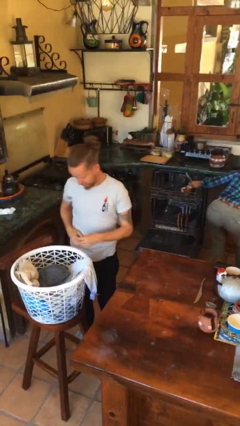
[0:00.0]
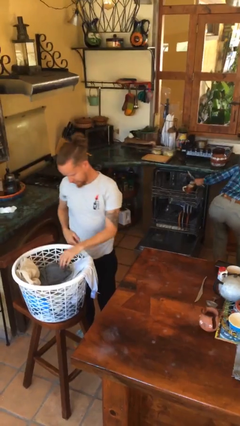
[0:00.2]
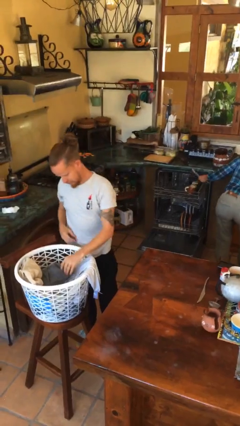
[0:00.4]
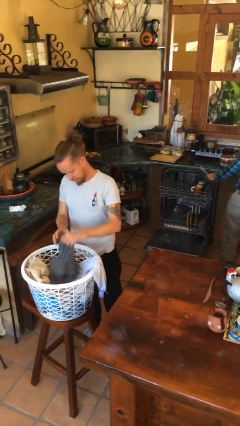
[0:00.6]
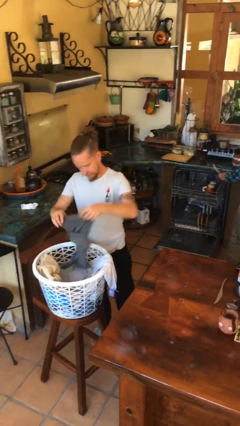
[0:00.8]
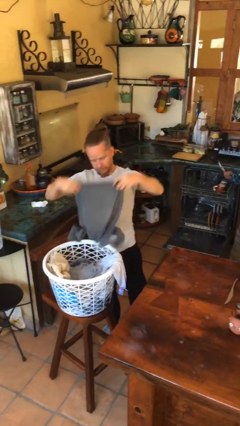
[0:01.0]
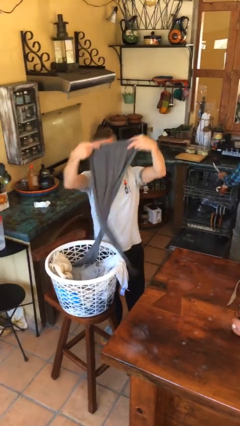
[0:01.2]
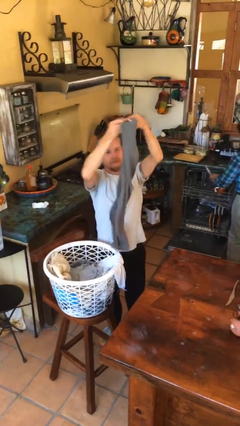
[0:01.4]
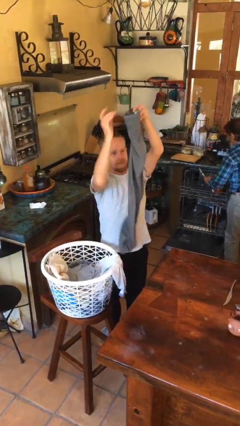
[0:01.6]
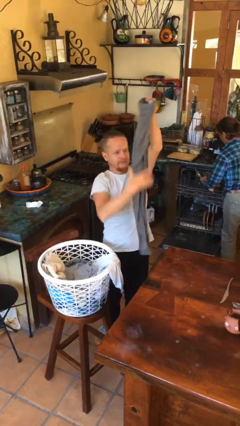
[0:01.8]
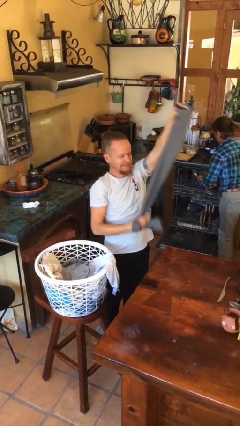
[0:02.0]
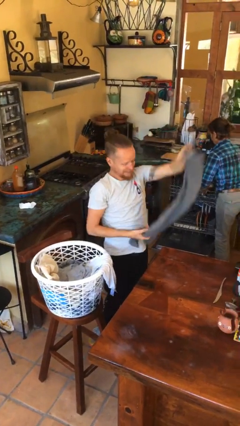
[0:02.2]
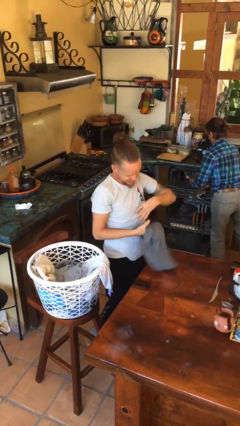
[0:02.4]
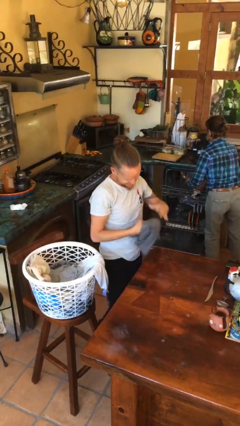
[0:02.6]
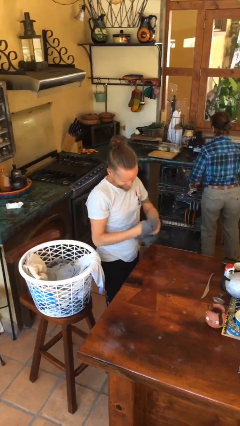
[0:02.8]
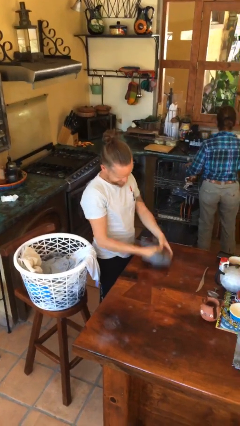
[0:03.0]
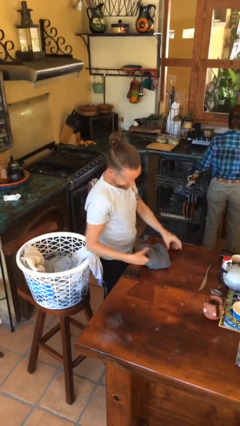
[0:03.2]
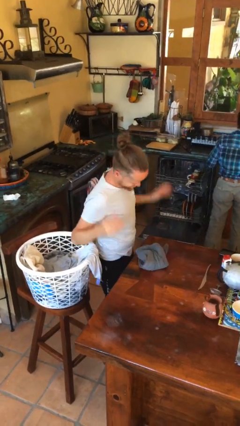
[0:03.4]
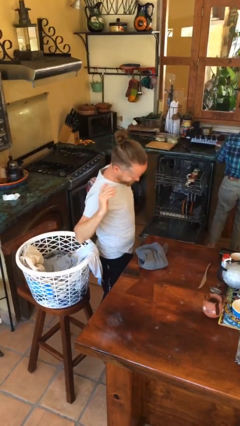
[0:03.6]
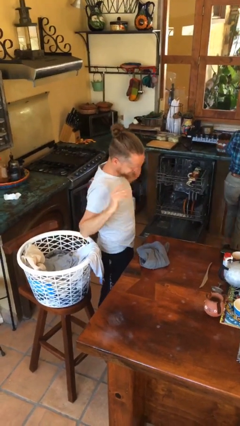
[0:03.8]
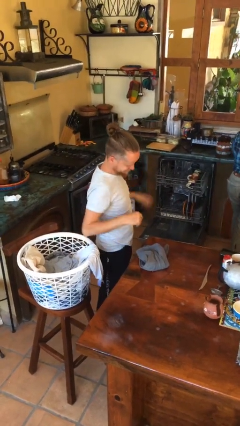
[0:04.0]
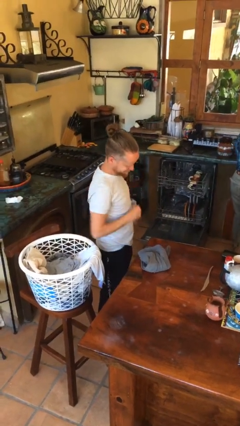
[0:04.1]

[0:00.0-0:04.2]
person folds pants

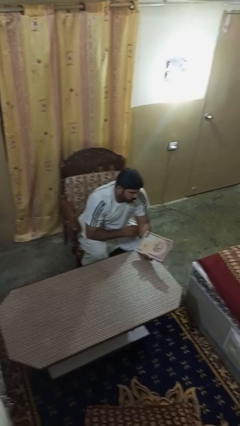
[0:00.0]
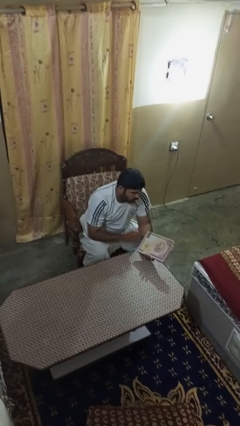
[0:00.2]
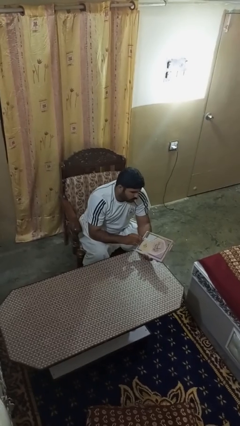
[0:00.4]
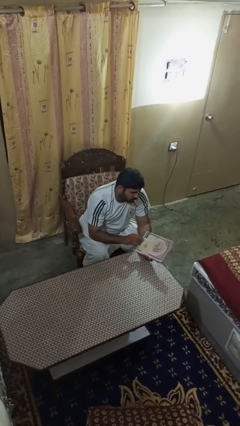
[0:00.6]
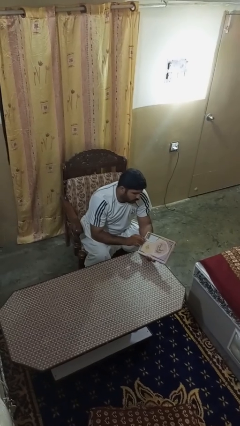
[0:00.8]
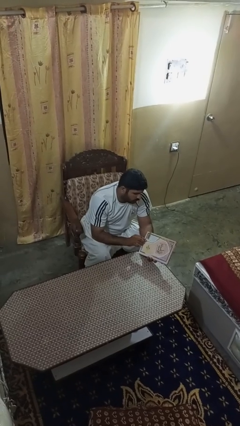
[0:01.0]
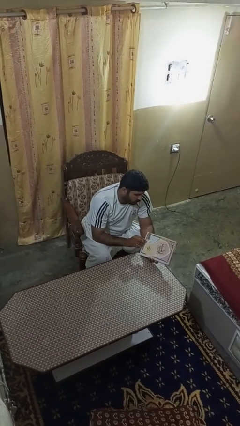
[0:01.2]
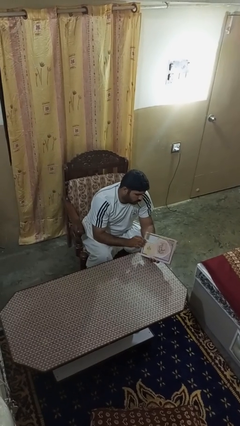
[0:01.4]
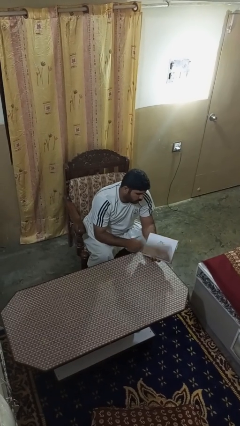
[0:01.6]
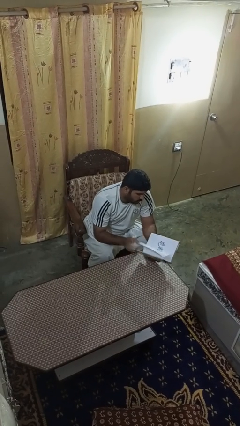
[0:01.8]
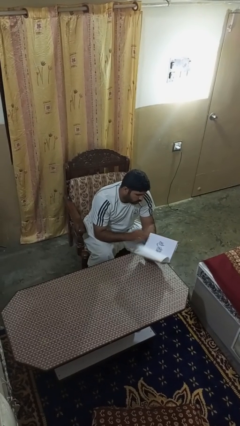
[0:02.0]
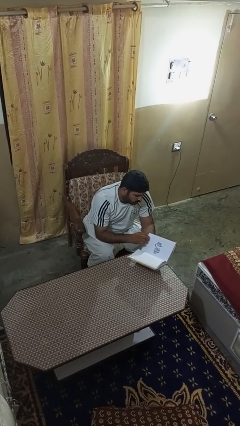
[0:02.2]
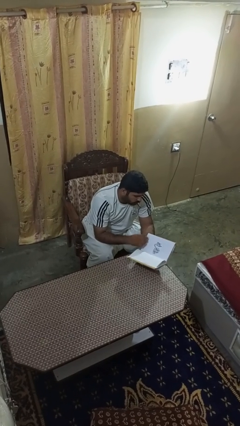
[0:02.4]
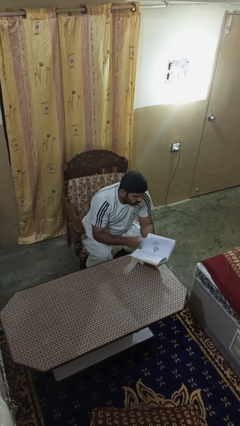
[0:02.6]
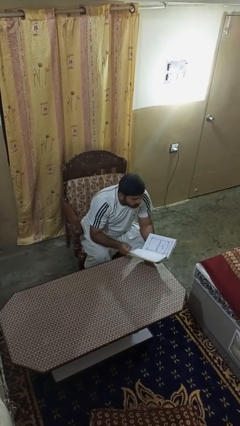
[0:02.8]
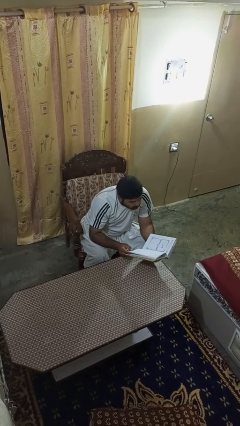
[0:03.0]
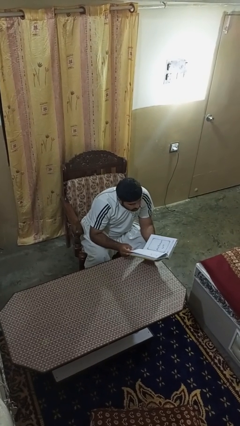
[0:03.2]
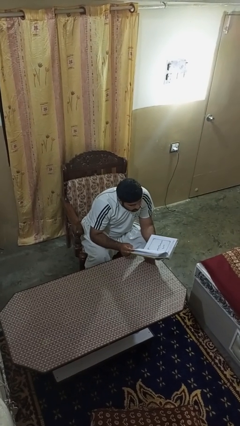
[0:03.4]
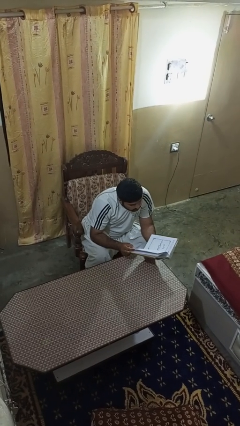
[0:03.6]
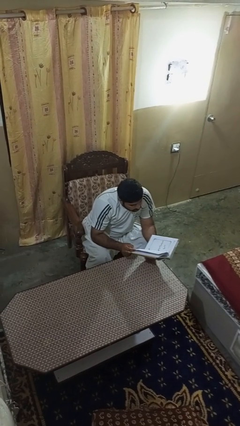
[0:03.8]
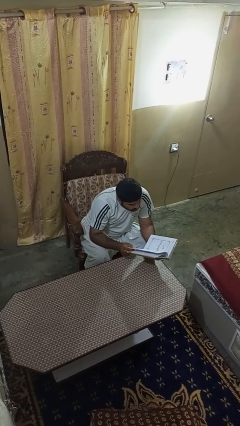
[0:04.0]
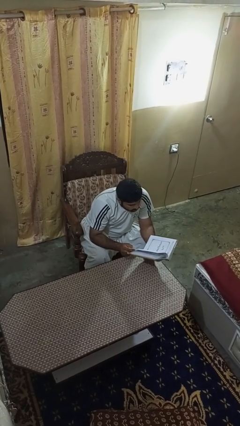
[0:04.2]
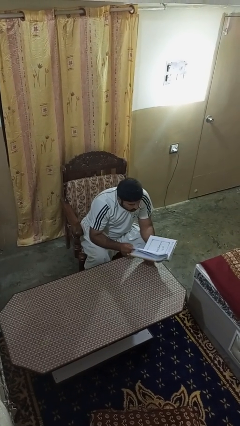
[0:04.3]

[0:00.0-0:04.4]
person reads book

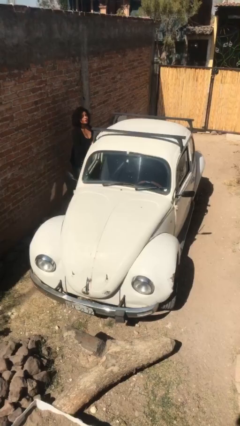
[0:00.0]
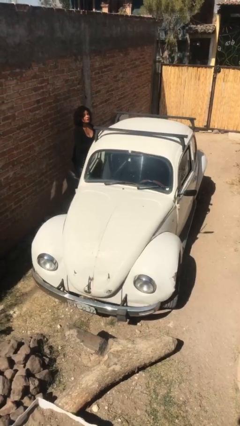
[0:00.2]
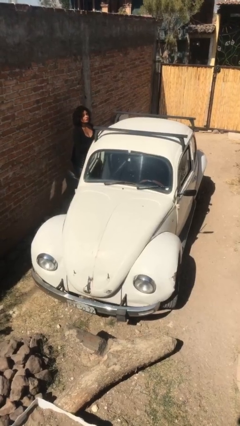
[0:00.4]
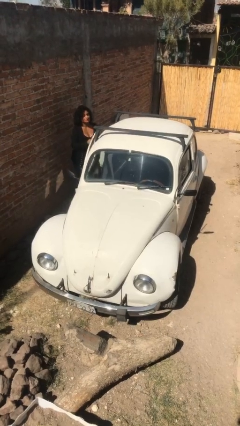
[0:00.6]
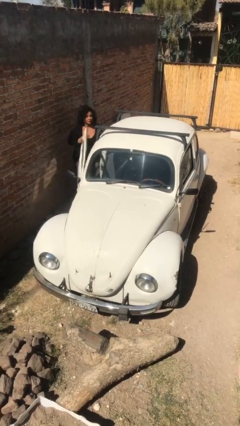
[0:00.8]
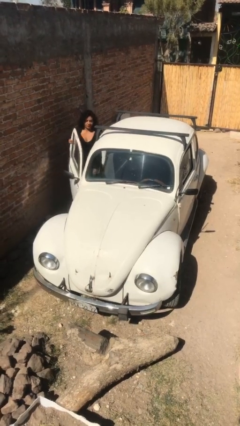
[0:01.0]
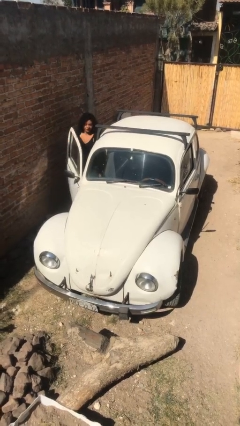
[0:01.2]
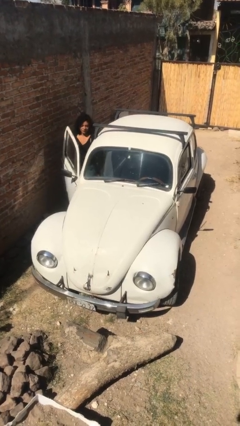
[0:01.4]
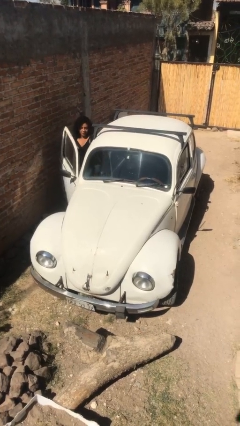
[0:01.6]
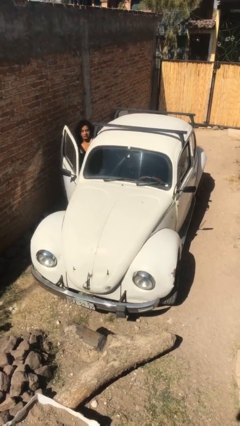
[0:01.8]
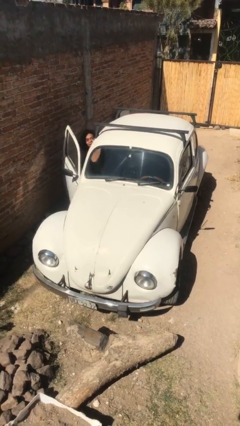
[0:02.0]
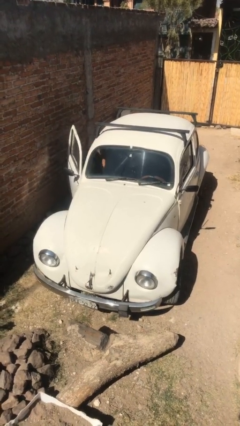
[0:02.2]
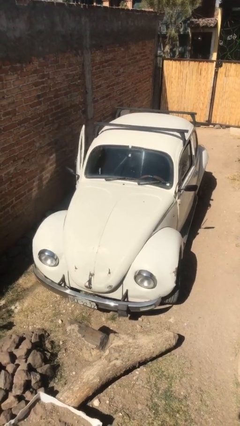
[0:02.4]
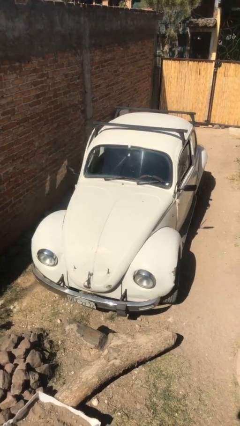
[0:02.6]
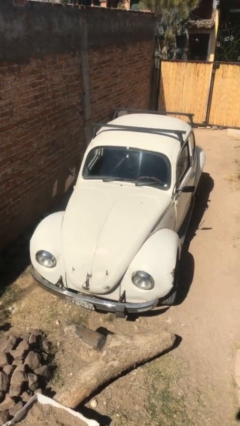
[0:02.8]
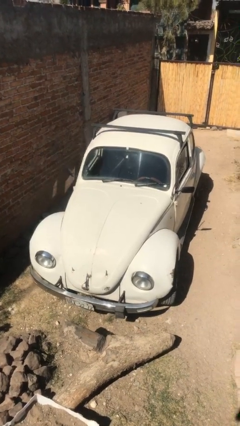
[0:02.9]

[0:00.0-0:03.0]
car picks up person

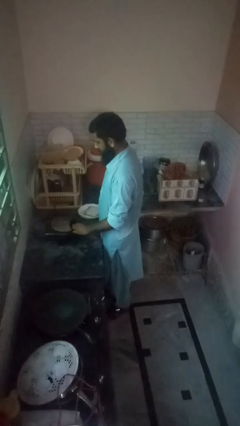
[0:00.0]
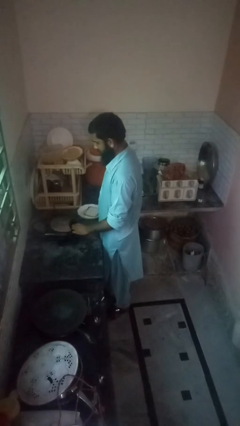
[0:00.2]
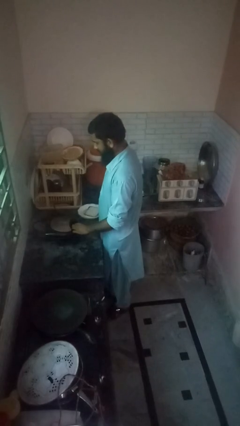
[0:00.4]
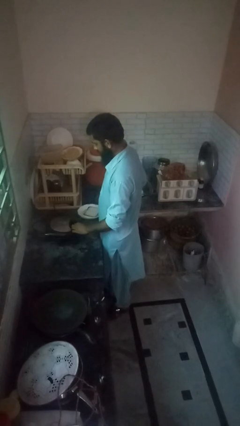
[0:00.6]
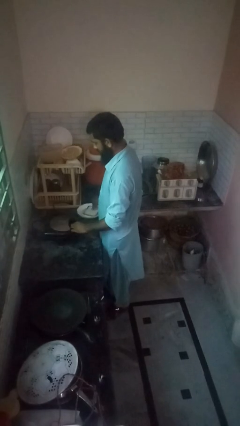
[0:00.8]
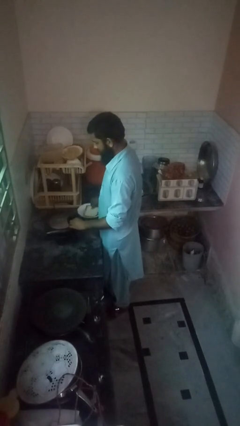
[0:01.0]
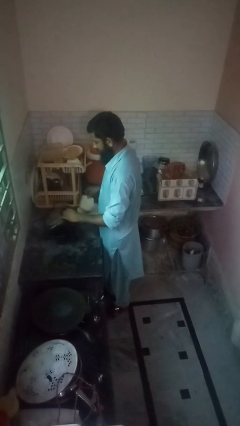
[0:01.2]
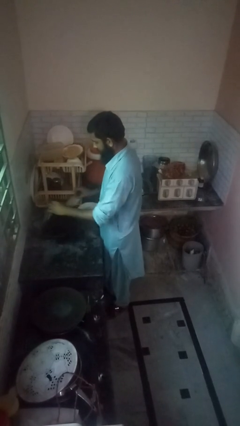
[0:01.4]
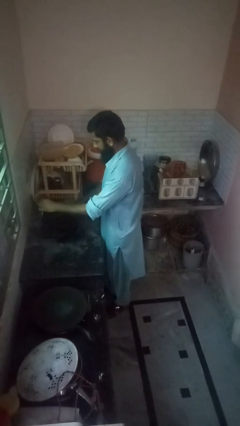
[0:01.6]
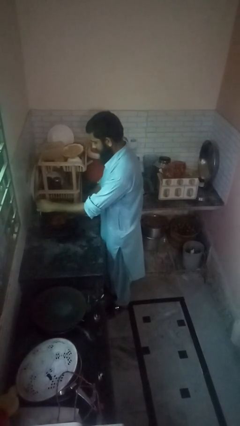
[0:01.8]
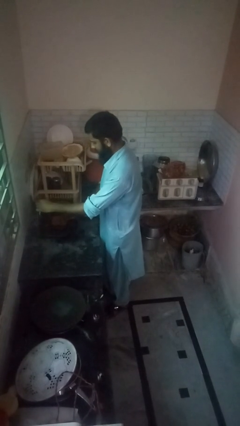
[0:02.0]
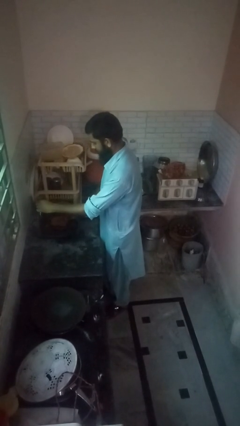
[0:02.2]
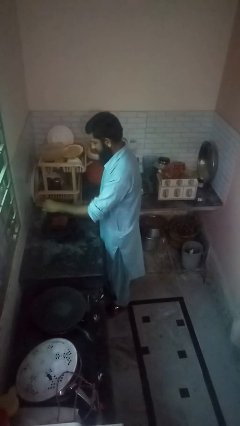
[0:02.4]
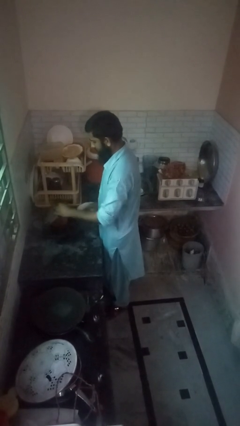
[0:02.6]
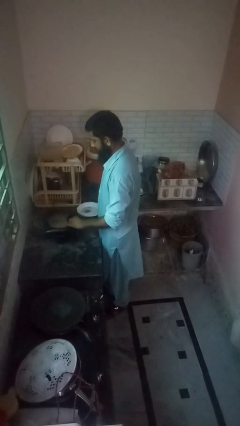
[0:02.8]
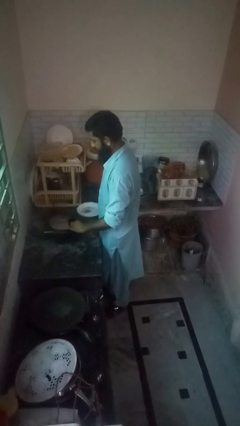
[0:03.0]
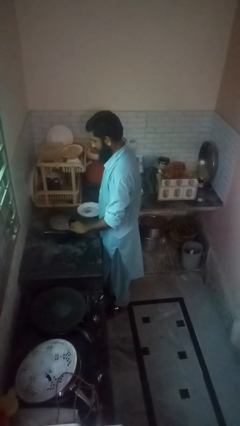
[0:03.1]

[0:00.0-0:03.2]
person puts object into toaster

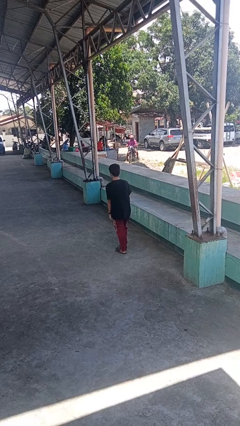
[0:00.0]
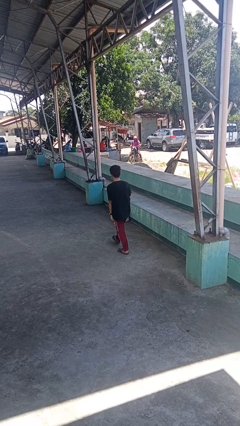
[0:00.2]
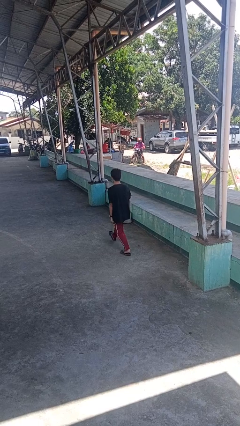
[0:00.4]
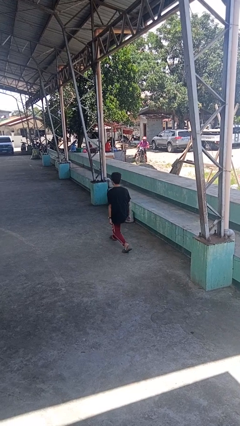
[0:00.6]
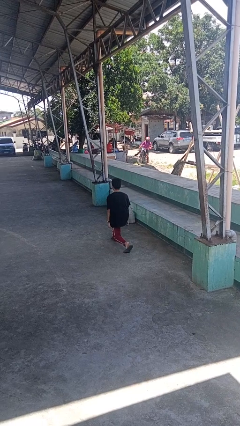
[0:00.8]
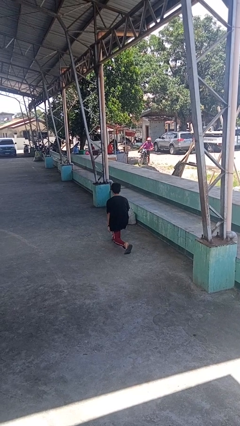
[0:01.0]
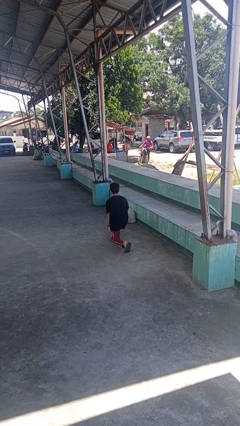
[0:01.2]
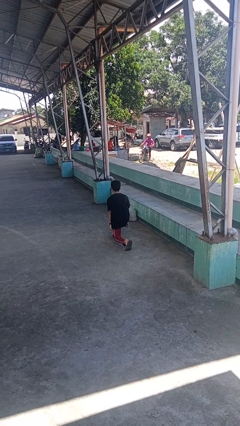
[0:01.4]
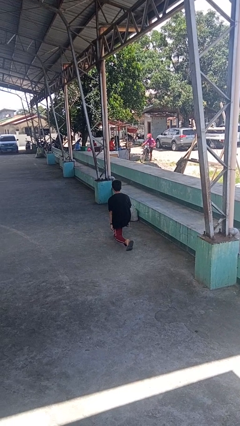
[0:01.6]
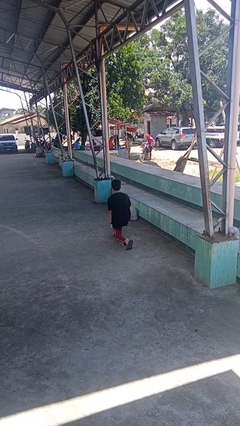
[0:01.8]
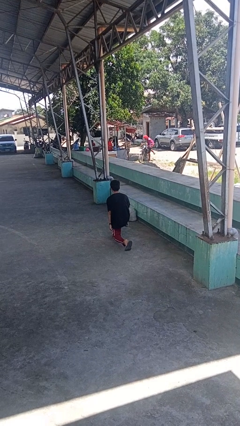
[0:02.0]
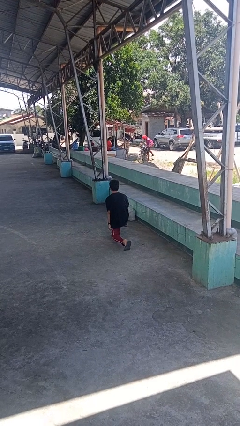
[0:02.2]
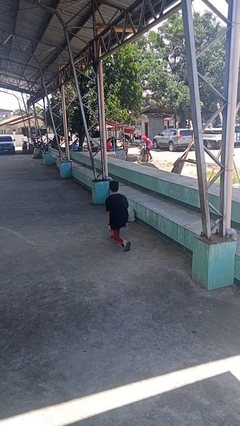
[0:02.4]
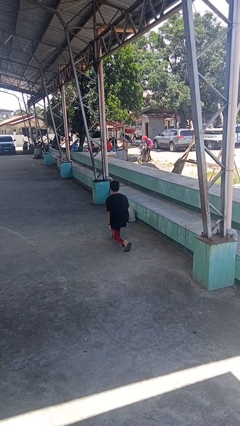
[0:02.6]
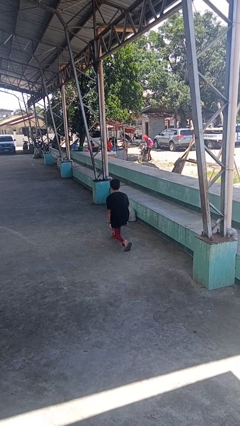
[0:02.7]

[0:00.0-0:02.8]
person exercises with lunges

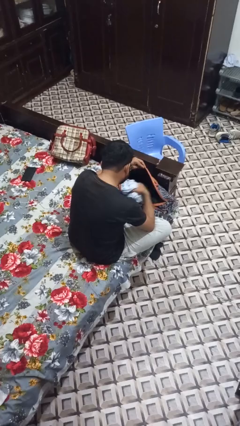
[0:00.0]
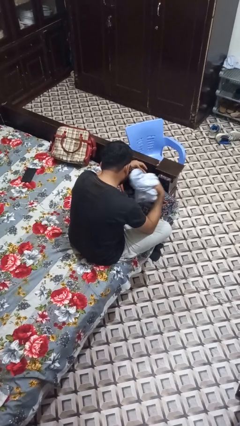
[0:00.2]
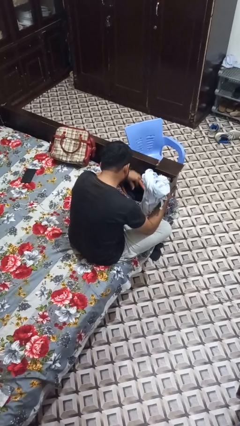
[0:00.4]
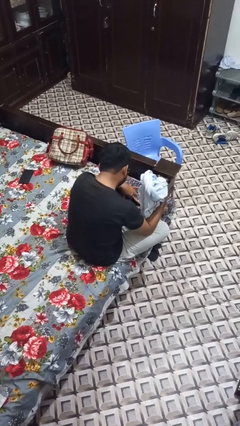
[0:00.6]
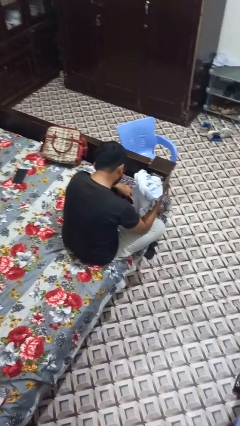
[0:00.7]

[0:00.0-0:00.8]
person takes object from backpack
